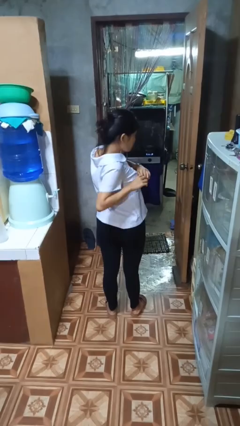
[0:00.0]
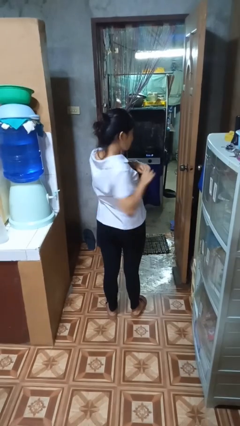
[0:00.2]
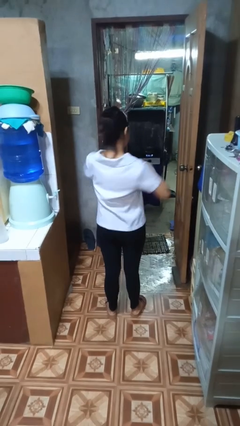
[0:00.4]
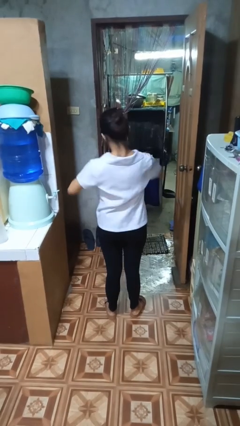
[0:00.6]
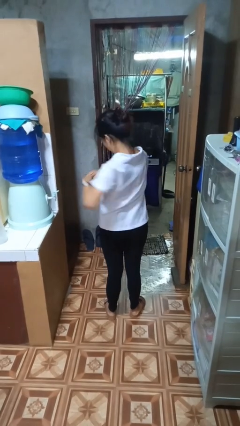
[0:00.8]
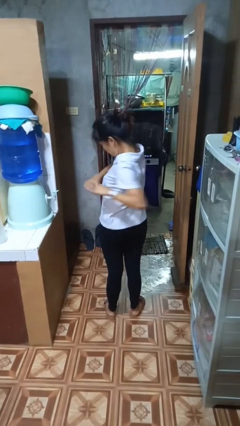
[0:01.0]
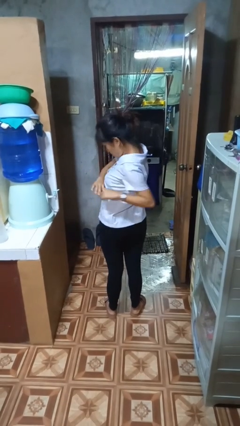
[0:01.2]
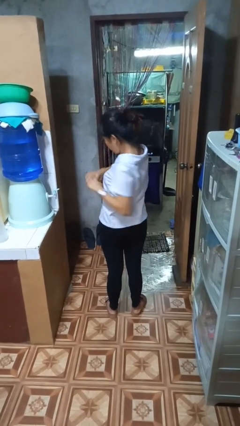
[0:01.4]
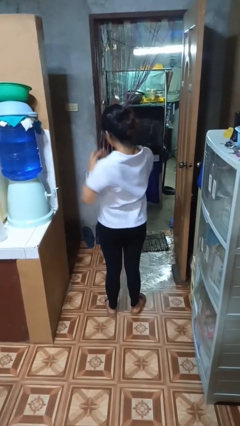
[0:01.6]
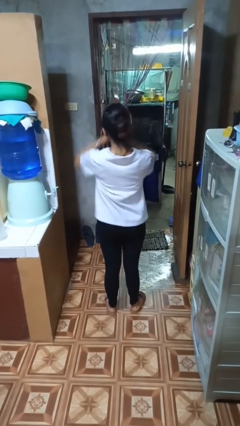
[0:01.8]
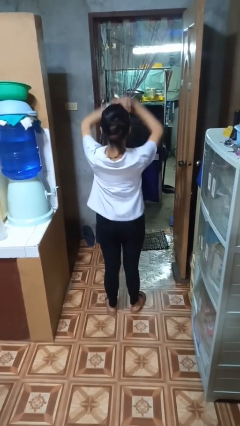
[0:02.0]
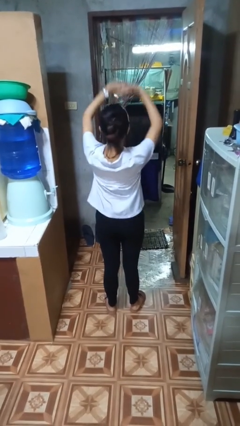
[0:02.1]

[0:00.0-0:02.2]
person stretches arms to side

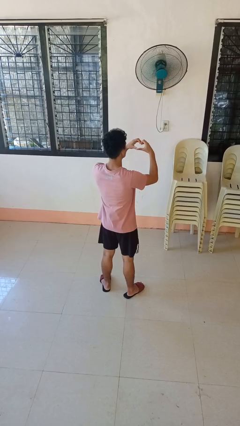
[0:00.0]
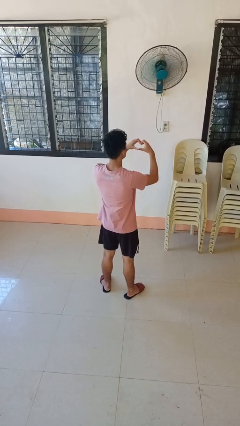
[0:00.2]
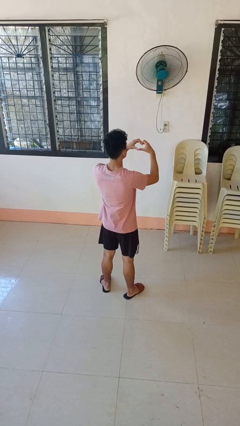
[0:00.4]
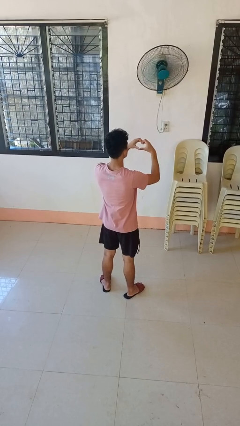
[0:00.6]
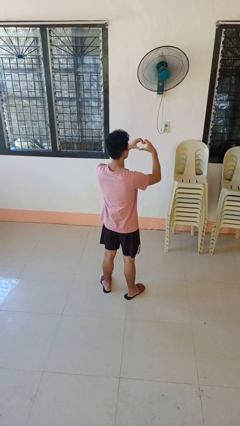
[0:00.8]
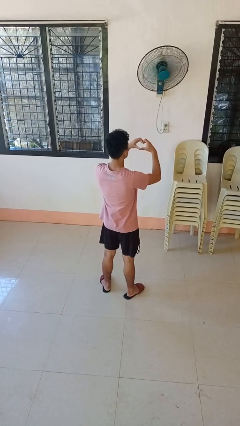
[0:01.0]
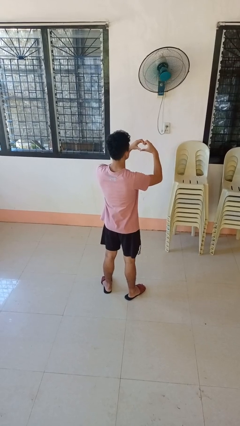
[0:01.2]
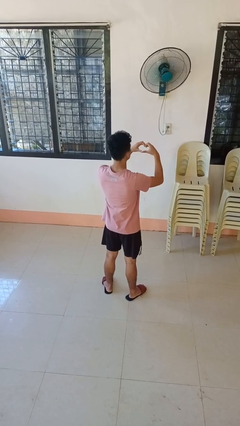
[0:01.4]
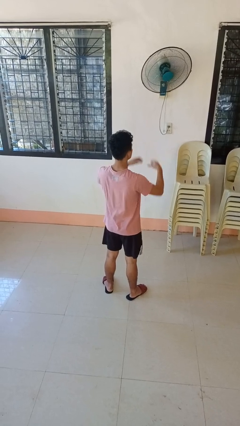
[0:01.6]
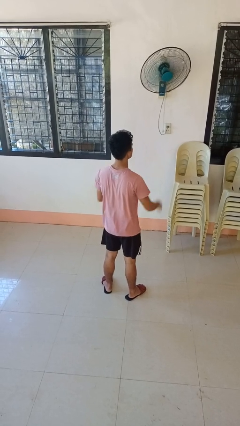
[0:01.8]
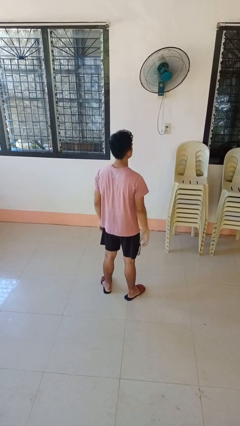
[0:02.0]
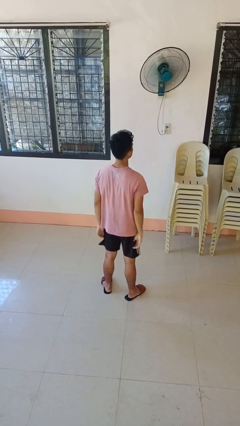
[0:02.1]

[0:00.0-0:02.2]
person gestures heart

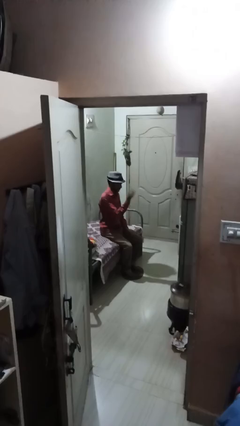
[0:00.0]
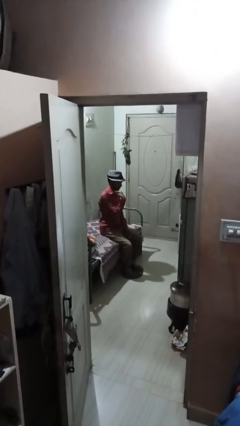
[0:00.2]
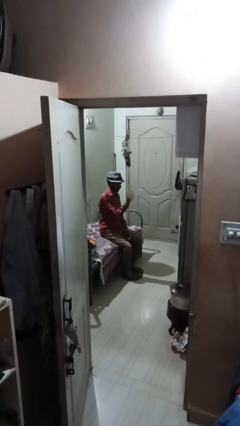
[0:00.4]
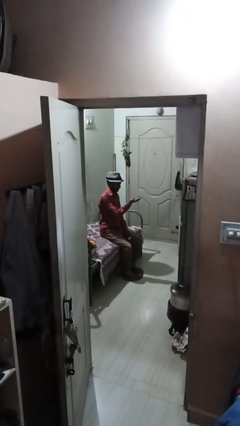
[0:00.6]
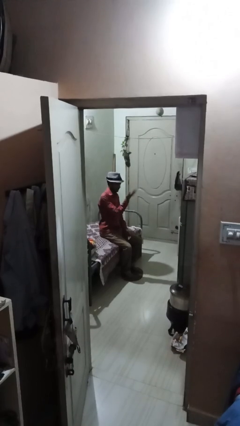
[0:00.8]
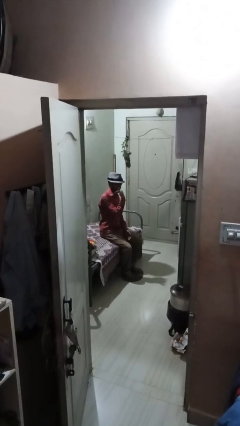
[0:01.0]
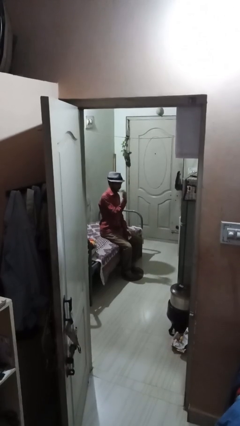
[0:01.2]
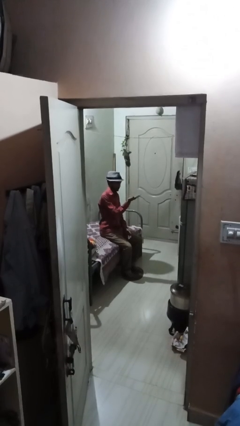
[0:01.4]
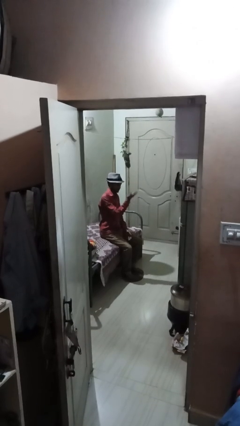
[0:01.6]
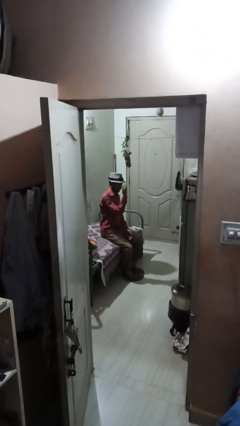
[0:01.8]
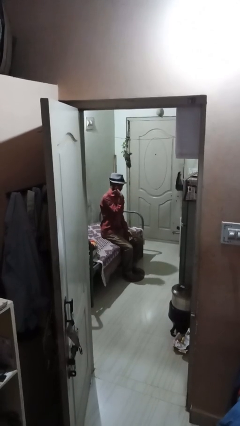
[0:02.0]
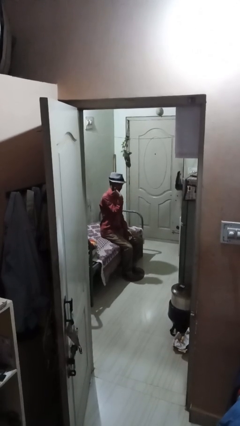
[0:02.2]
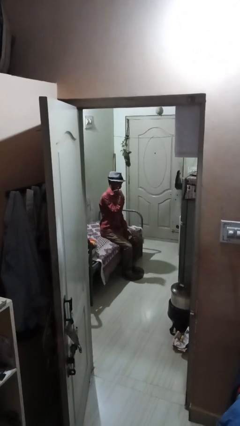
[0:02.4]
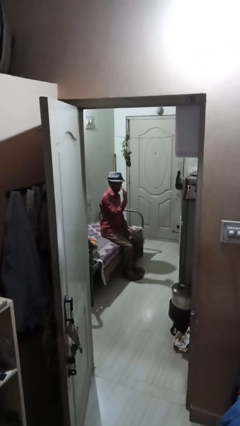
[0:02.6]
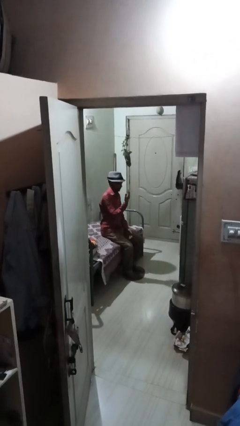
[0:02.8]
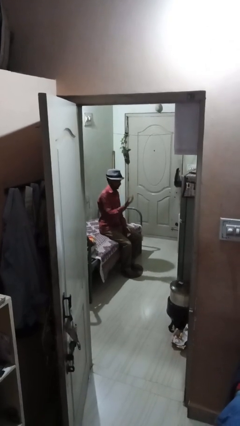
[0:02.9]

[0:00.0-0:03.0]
person gestures come here

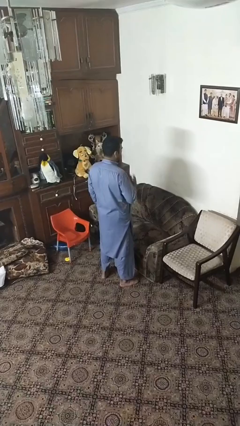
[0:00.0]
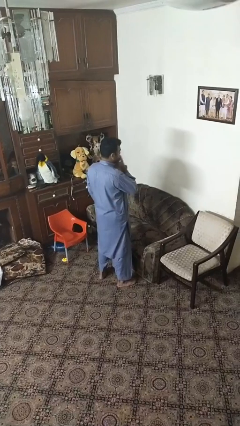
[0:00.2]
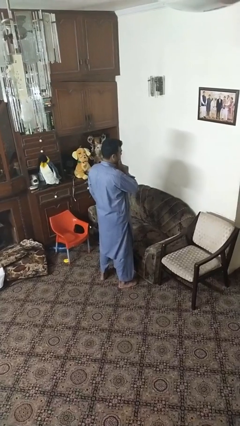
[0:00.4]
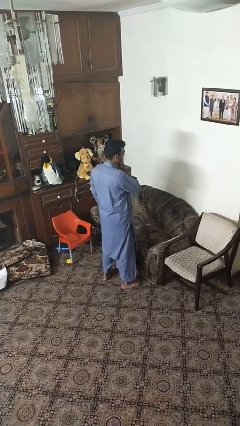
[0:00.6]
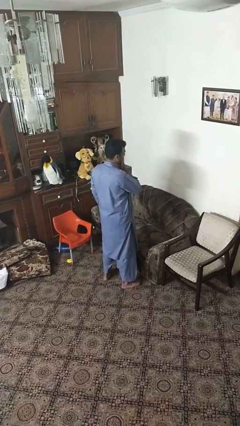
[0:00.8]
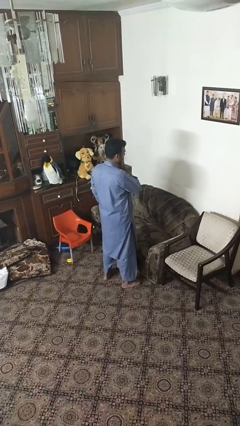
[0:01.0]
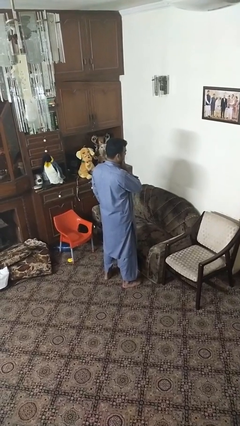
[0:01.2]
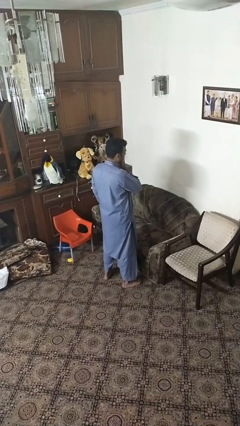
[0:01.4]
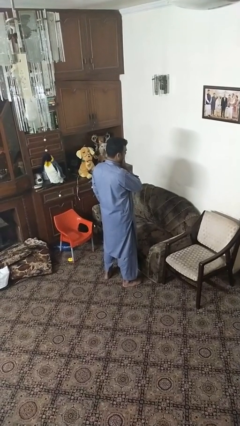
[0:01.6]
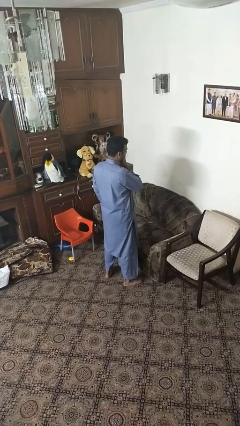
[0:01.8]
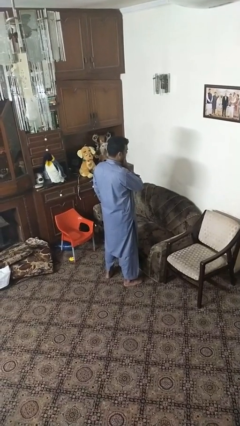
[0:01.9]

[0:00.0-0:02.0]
person strokes chin

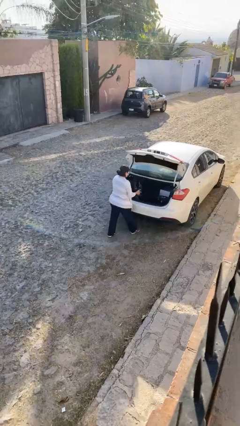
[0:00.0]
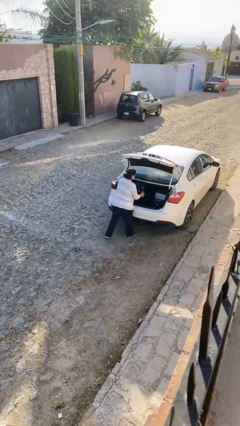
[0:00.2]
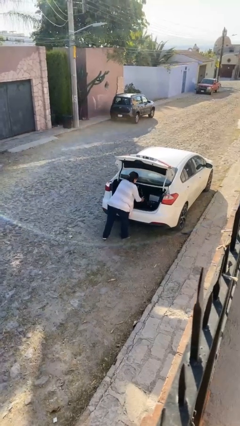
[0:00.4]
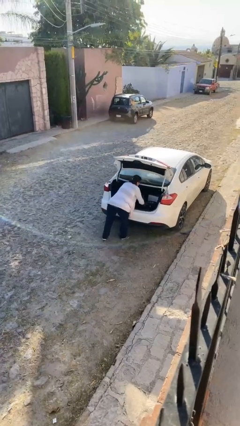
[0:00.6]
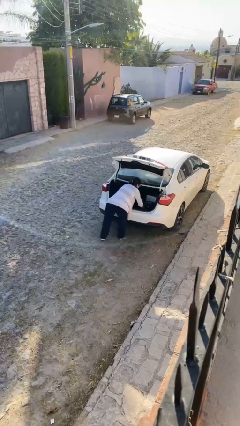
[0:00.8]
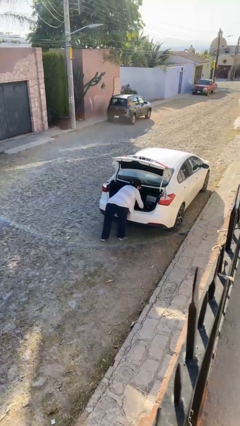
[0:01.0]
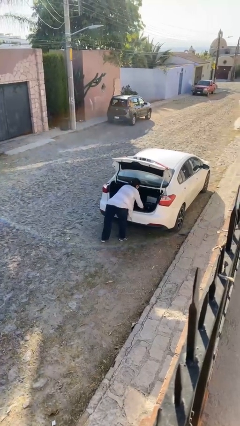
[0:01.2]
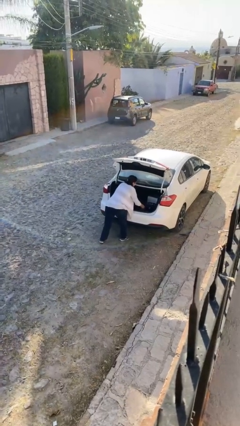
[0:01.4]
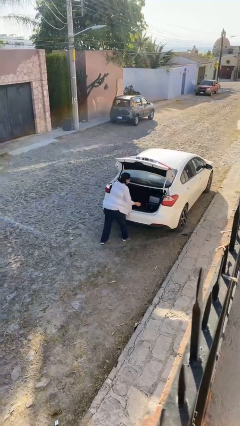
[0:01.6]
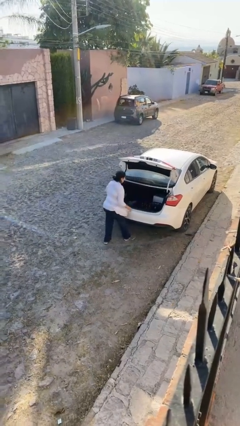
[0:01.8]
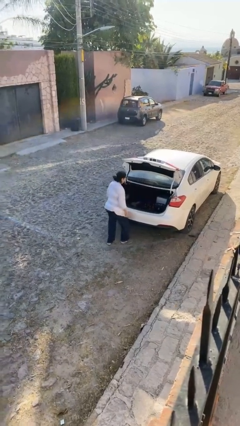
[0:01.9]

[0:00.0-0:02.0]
person loads car

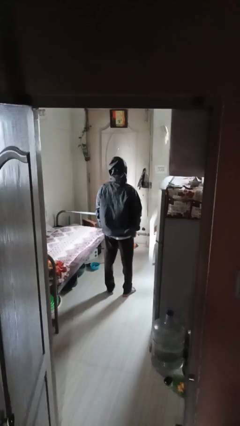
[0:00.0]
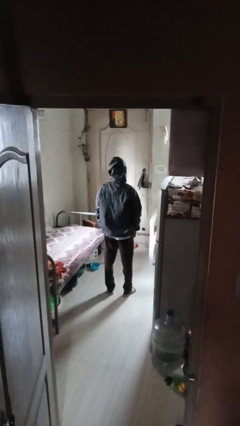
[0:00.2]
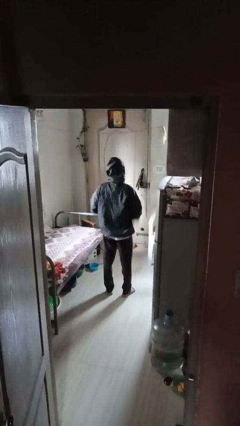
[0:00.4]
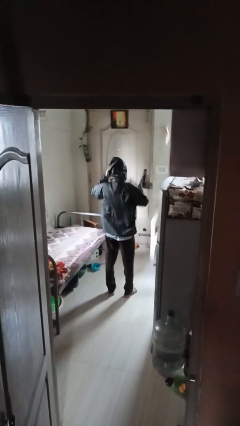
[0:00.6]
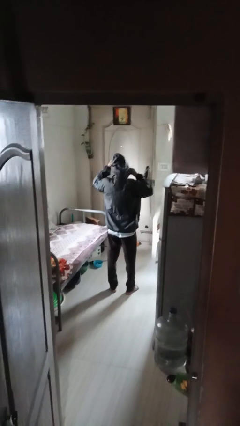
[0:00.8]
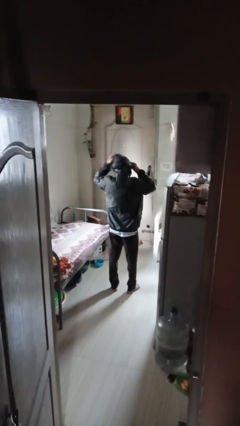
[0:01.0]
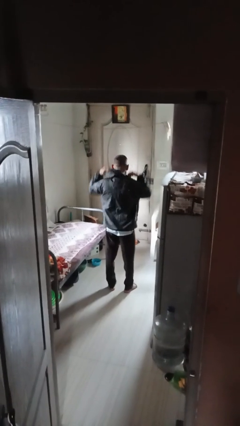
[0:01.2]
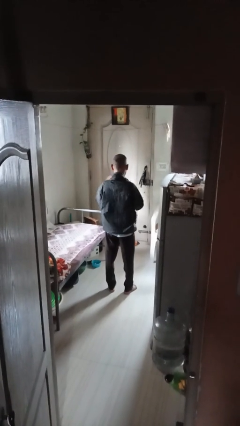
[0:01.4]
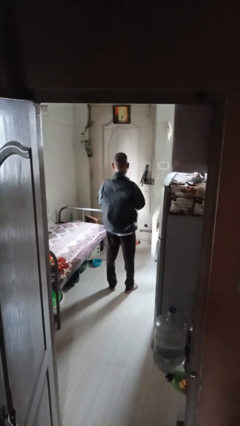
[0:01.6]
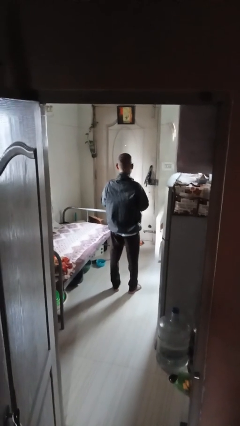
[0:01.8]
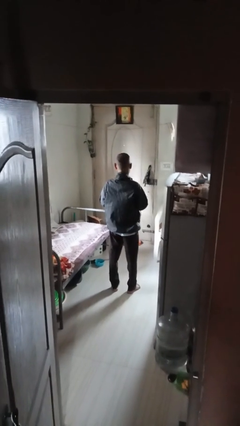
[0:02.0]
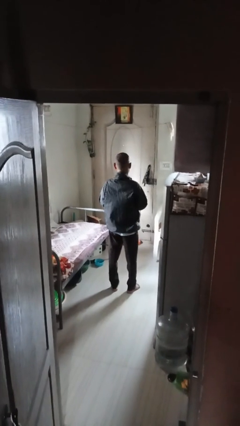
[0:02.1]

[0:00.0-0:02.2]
person takes off hoodie

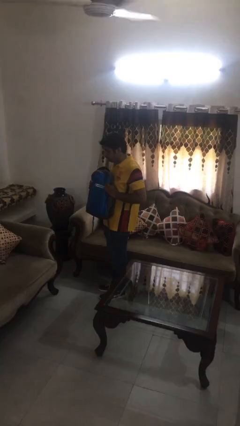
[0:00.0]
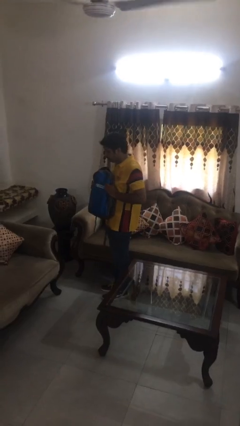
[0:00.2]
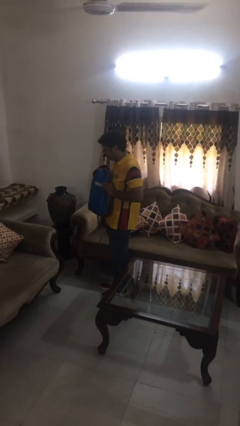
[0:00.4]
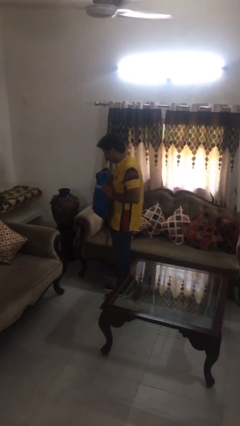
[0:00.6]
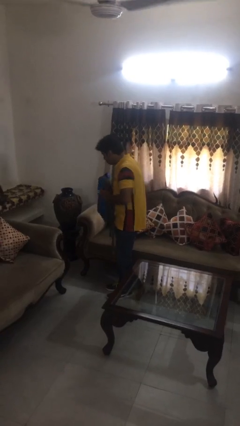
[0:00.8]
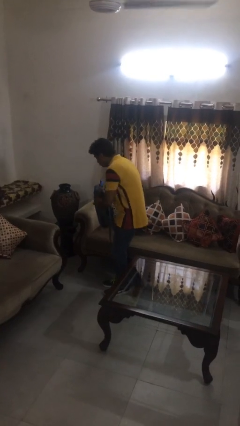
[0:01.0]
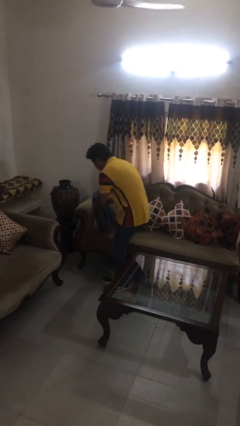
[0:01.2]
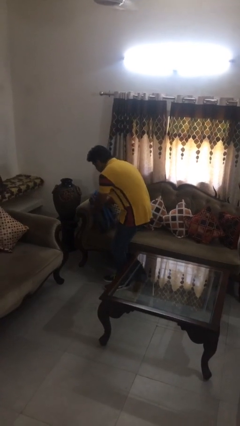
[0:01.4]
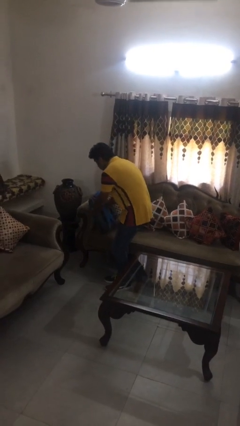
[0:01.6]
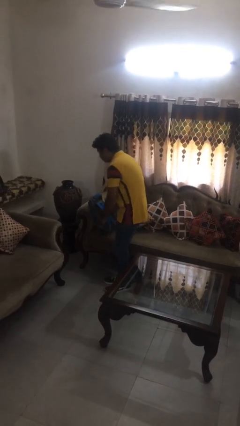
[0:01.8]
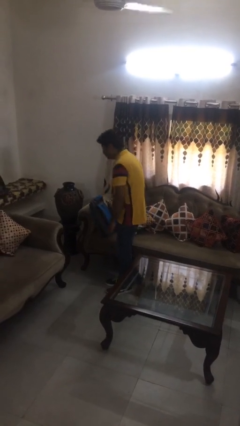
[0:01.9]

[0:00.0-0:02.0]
person puts down object on couch

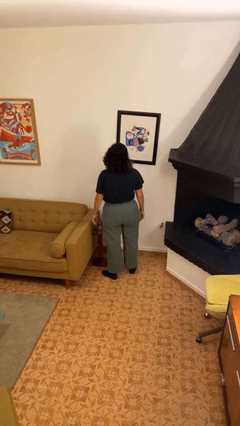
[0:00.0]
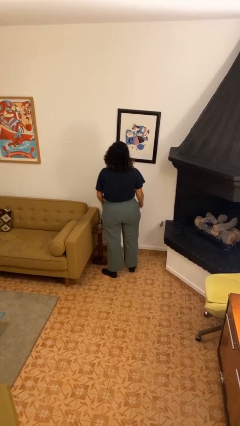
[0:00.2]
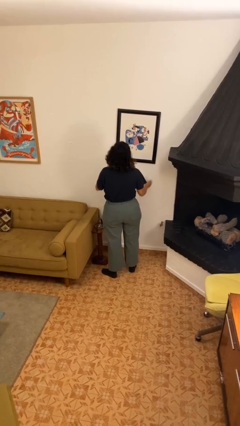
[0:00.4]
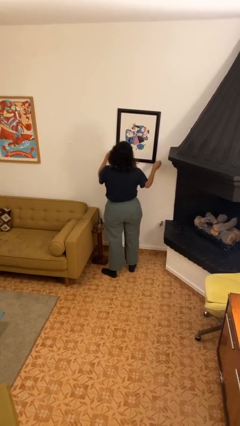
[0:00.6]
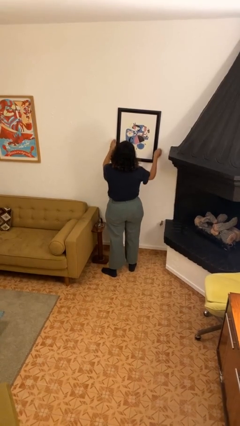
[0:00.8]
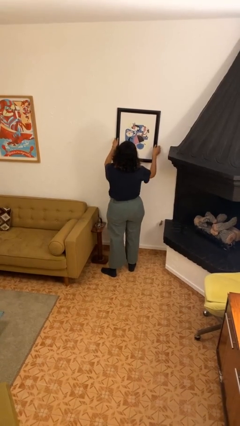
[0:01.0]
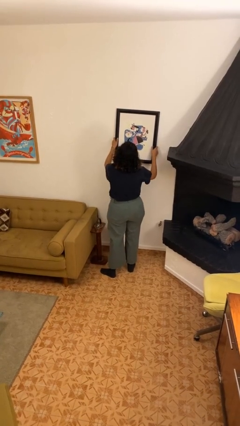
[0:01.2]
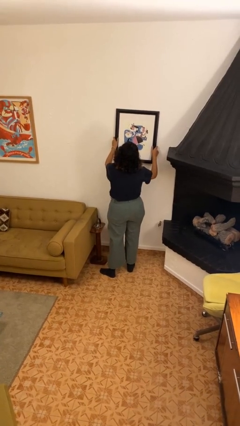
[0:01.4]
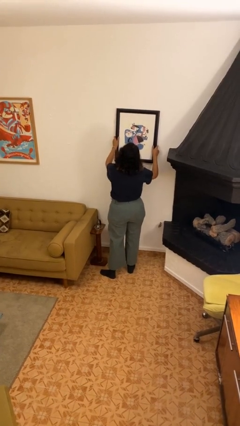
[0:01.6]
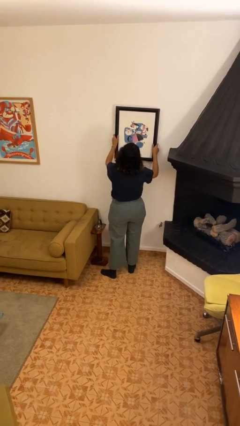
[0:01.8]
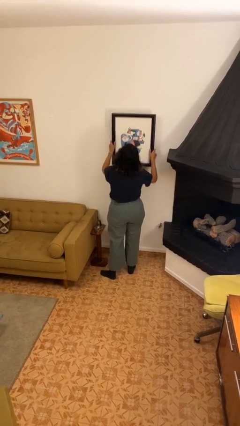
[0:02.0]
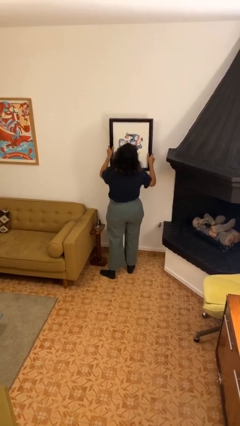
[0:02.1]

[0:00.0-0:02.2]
person takes down picture frame
